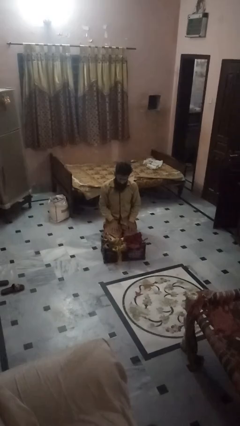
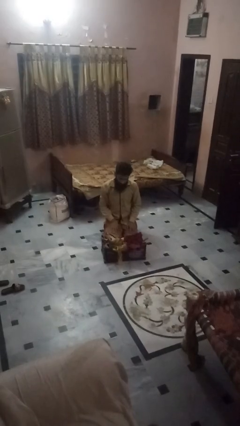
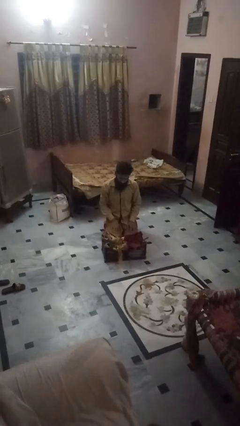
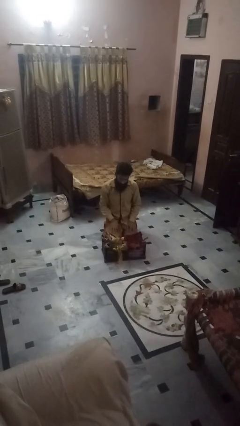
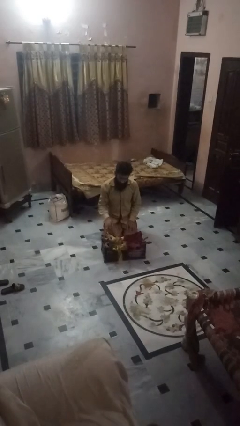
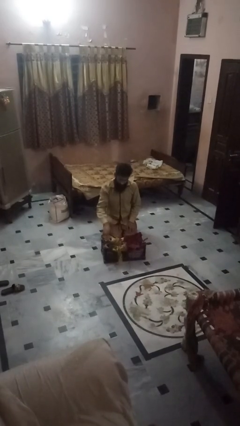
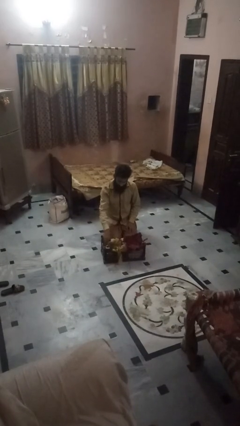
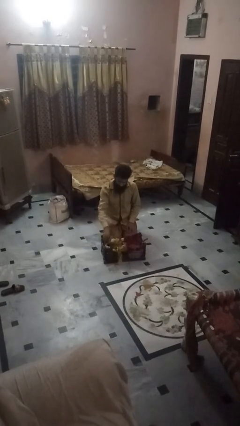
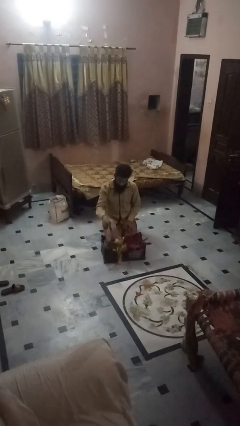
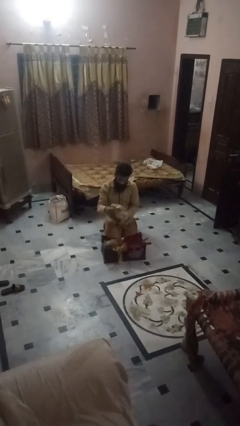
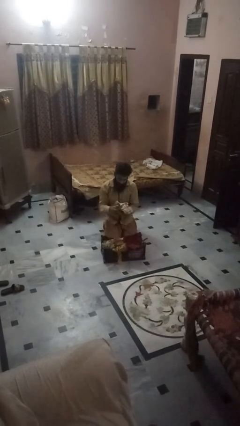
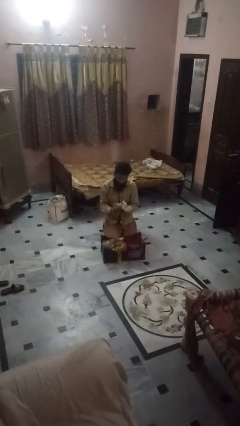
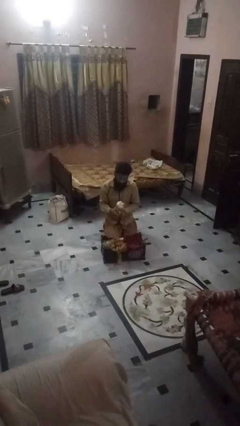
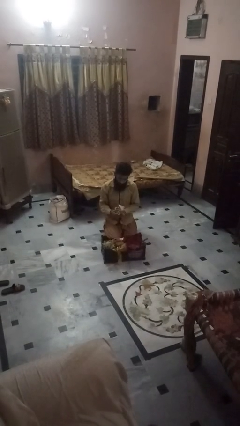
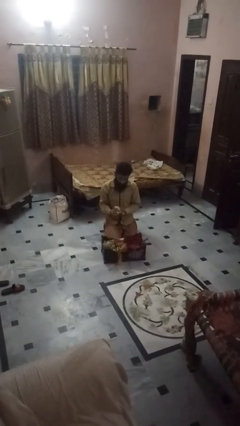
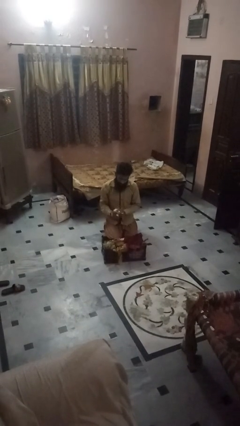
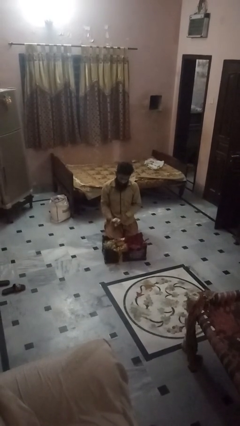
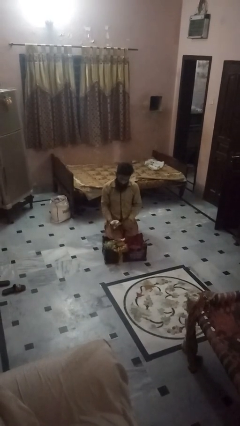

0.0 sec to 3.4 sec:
person puts object into basket

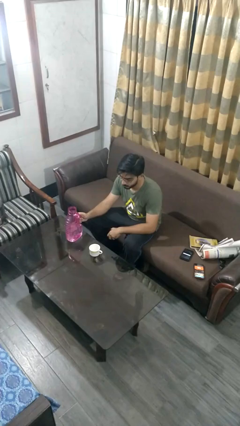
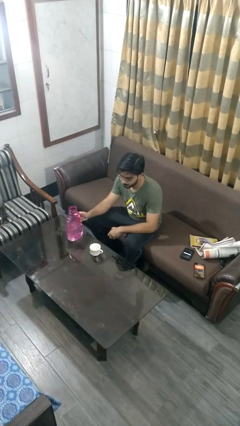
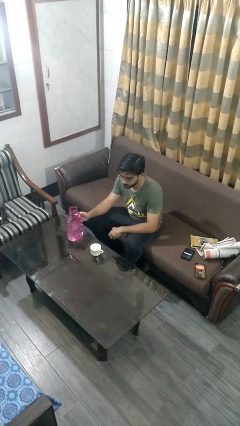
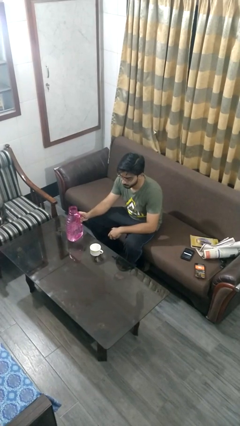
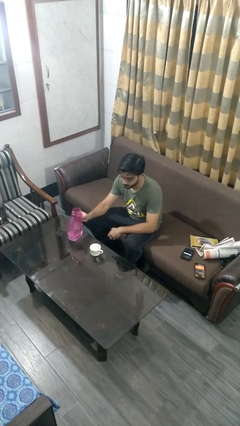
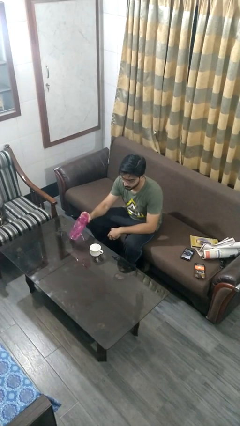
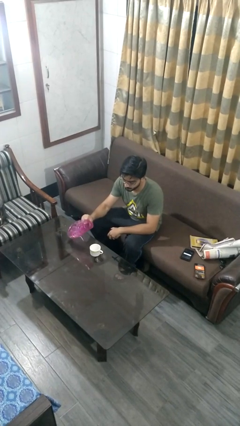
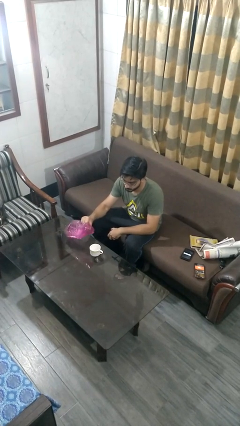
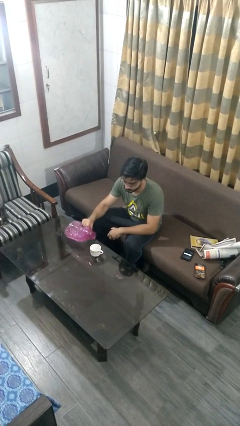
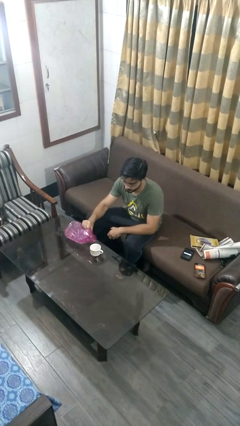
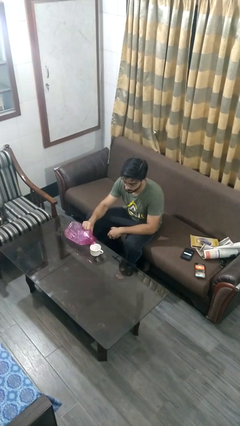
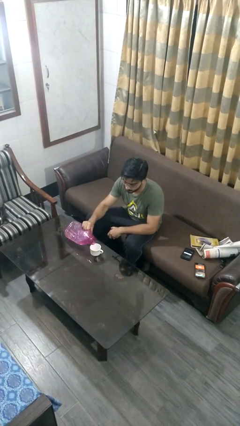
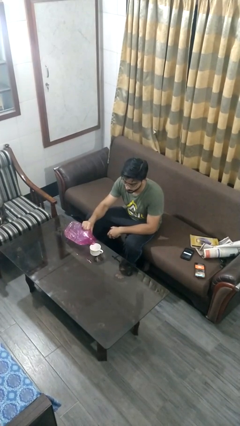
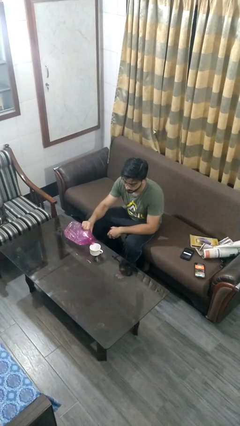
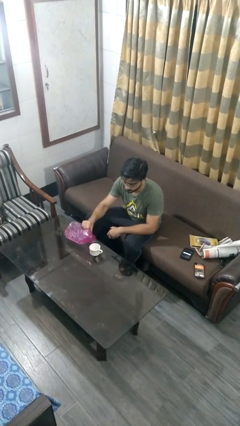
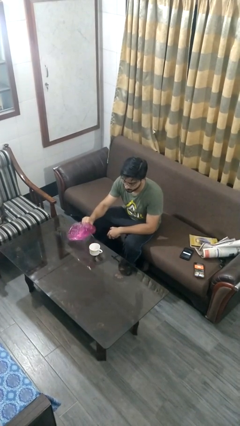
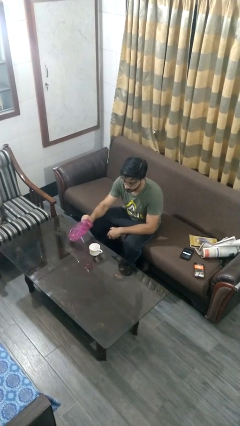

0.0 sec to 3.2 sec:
person pours liquid into cup

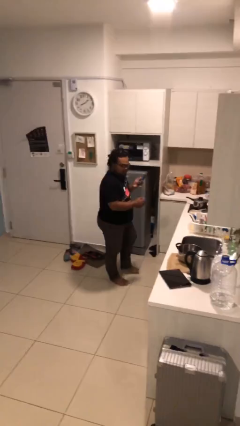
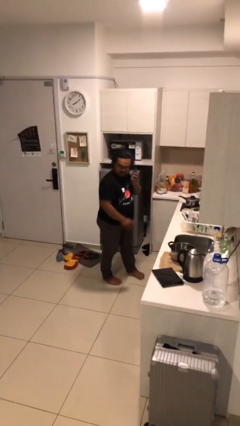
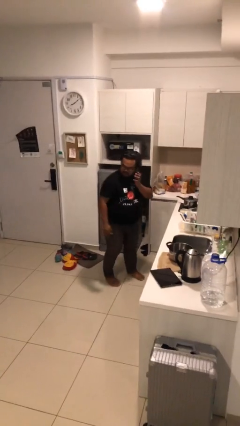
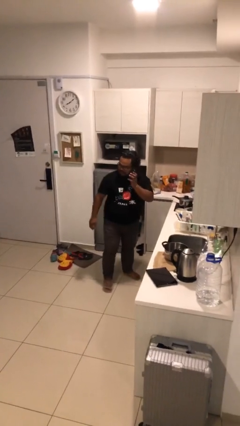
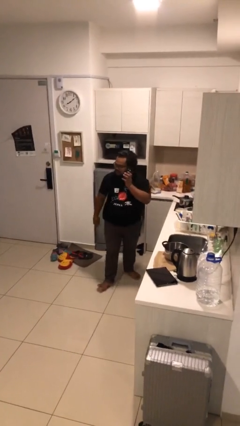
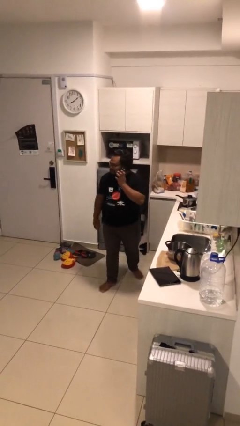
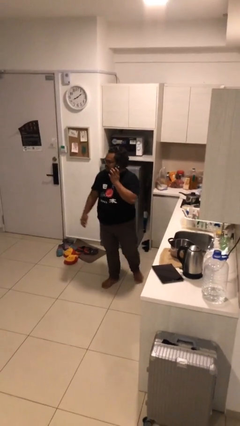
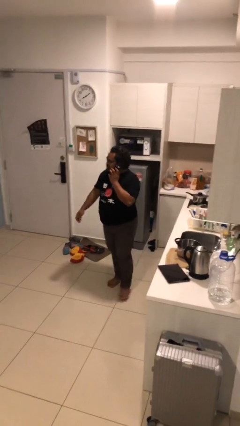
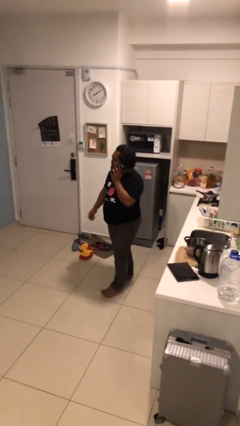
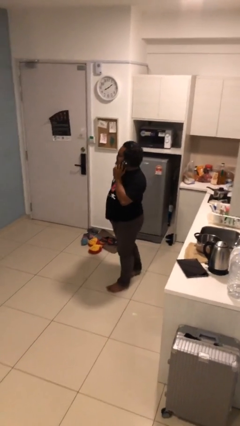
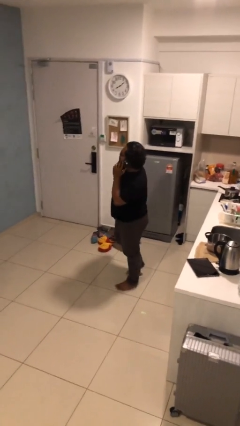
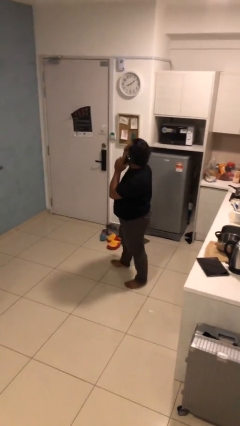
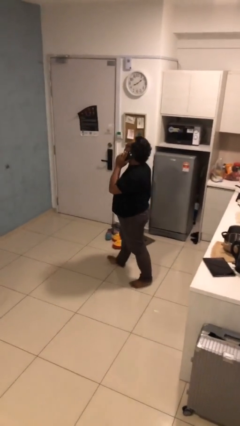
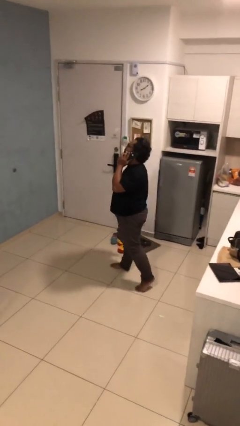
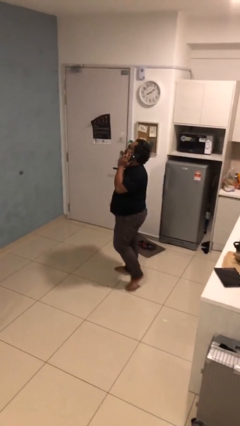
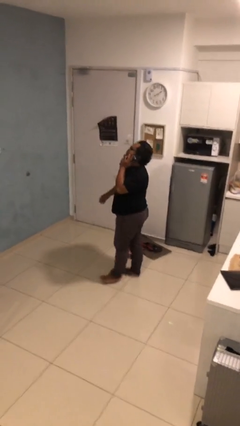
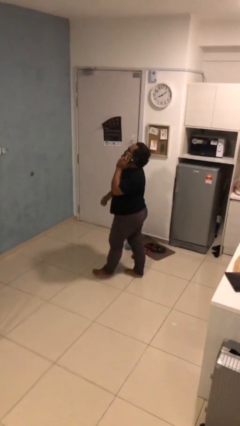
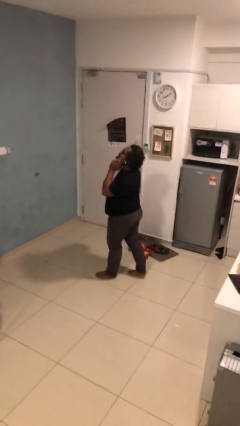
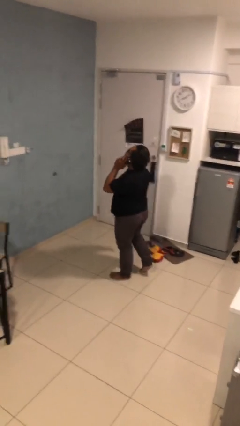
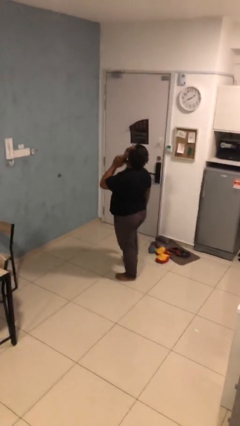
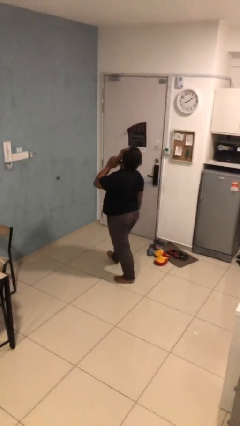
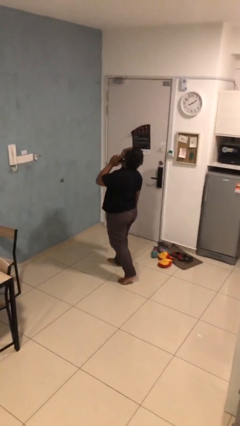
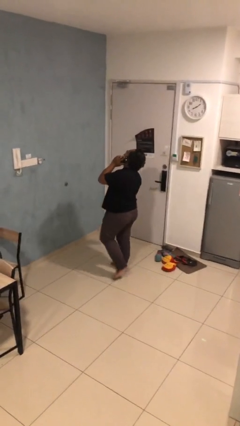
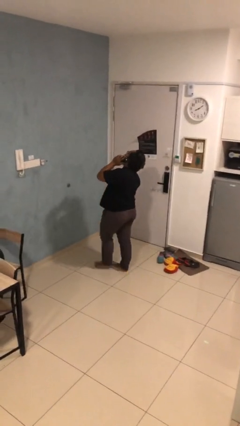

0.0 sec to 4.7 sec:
person talks on phone

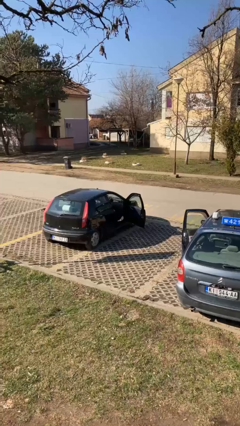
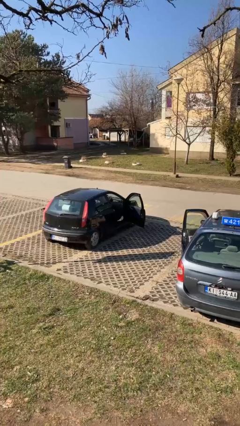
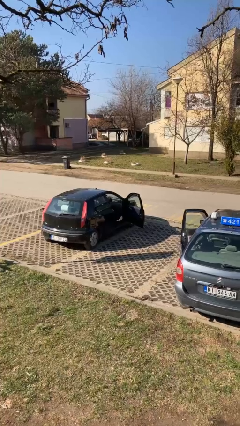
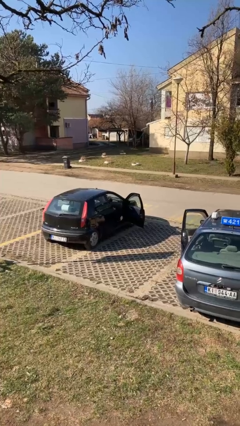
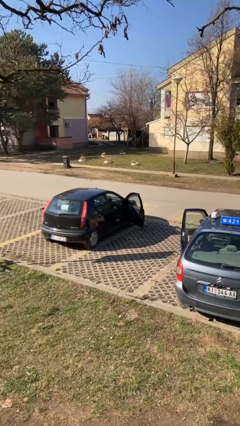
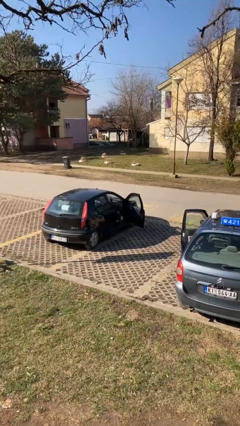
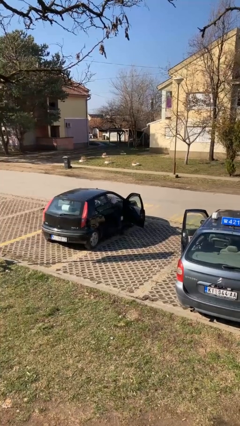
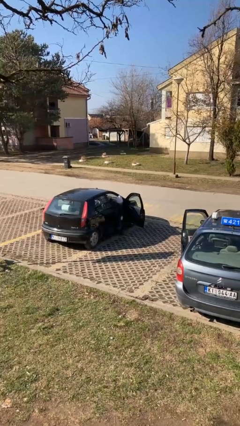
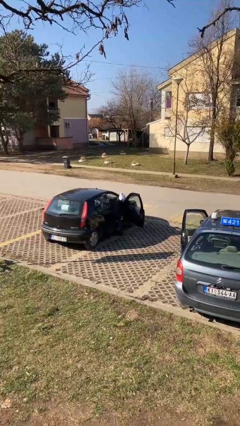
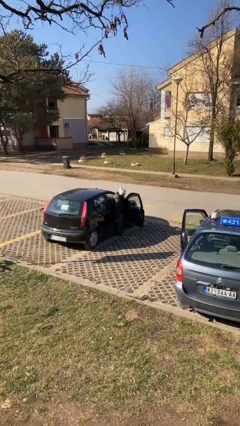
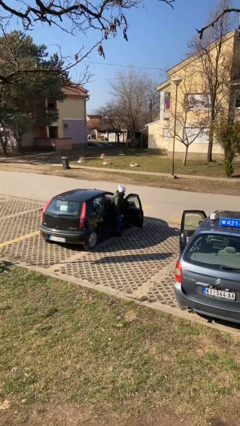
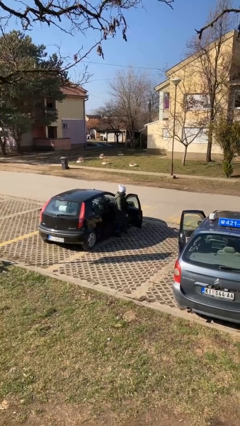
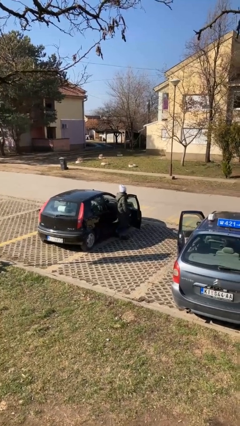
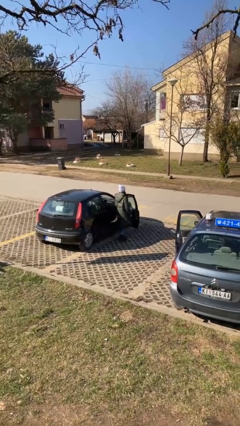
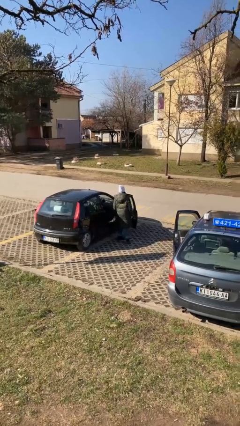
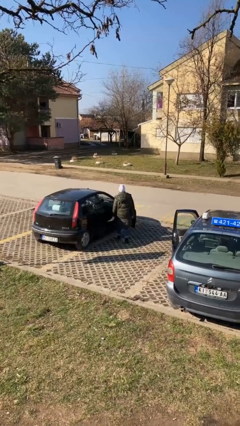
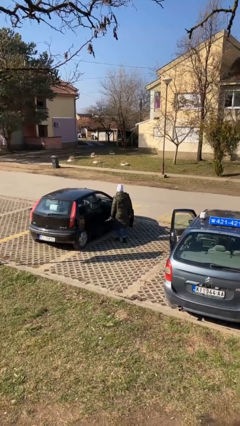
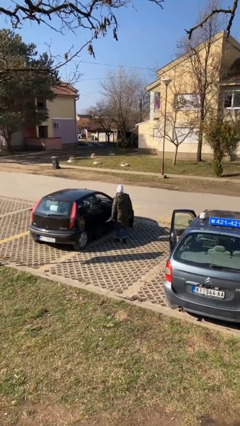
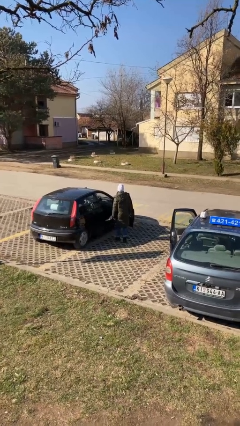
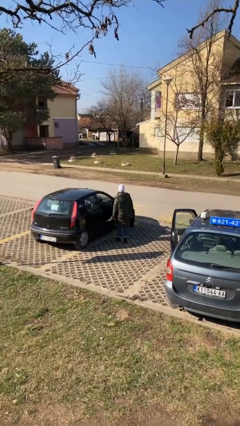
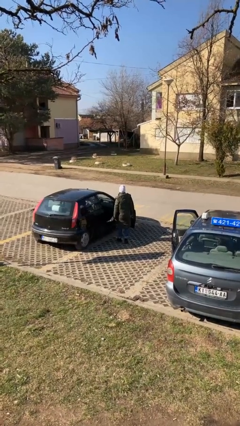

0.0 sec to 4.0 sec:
person exits car

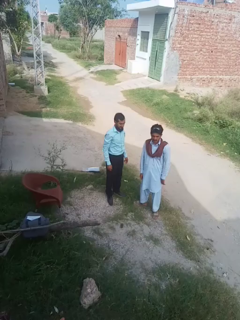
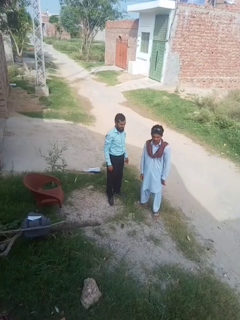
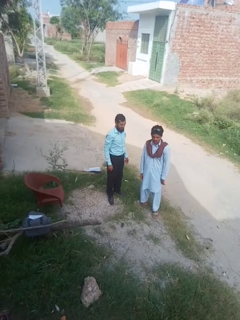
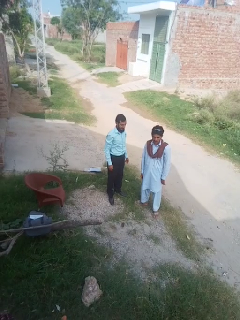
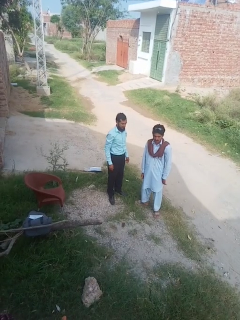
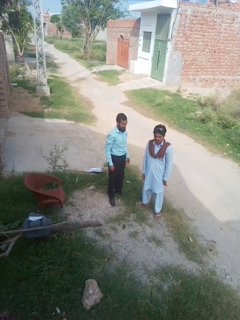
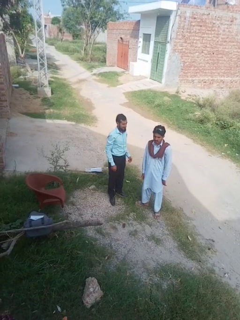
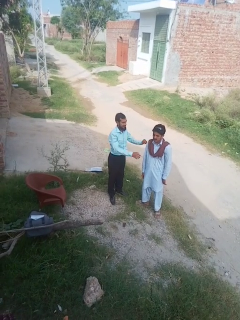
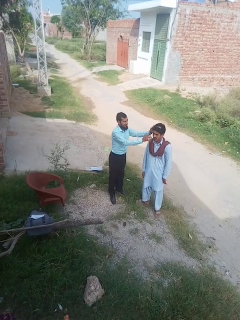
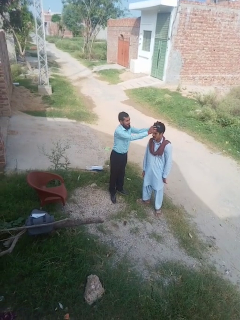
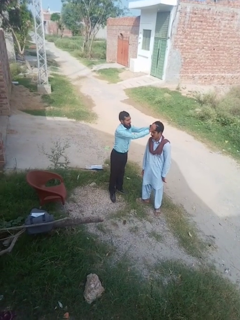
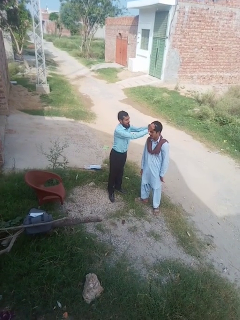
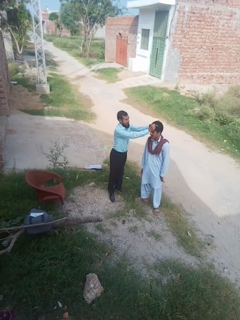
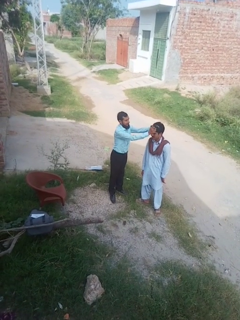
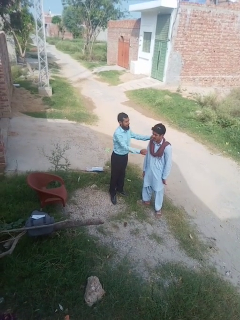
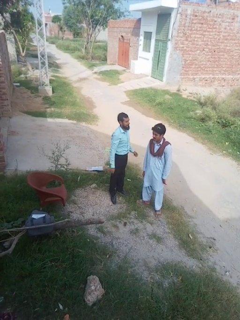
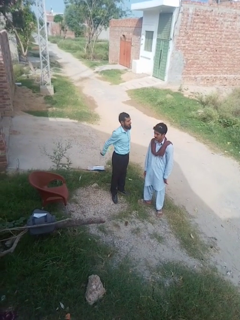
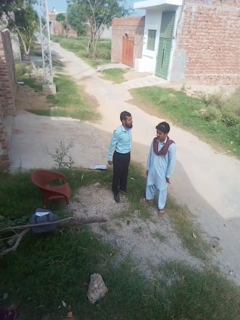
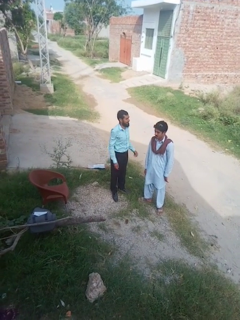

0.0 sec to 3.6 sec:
person grabs person by hair
